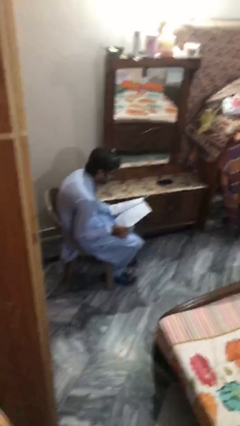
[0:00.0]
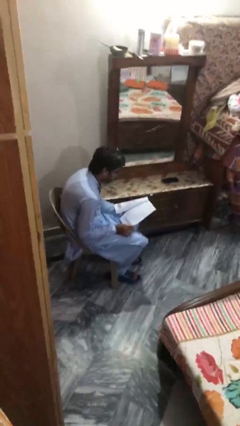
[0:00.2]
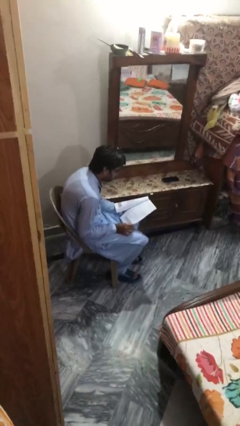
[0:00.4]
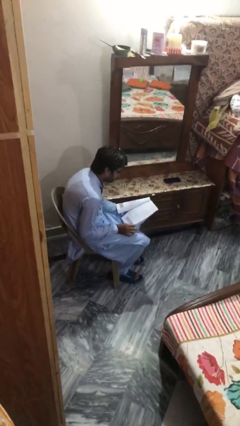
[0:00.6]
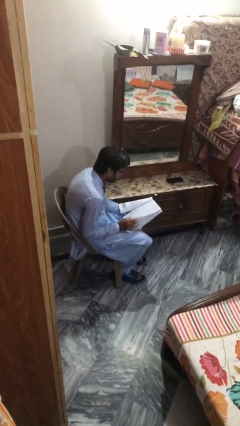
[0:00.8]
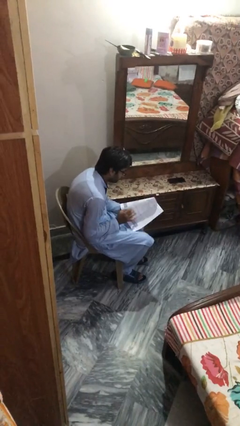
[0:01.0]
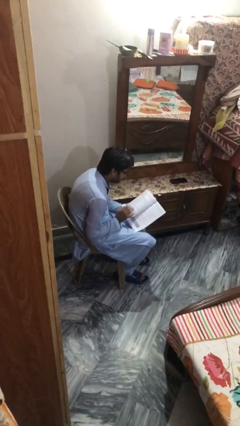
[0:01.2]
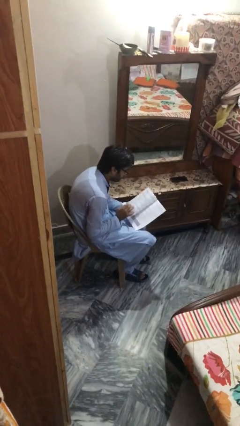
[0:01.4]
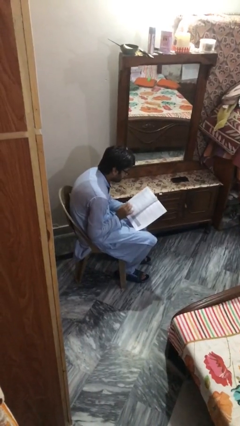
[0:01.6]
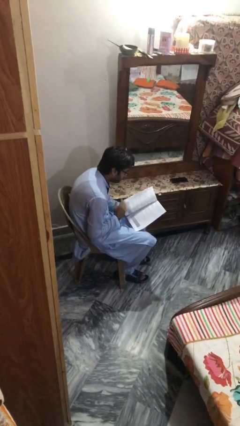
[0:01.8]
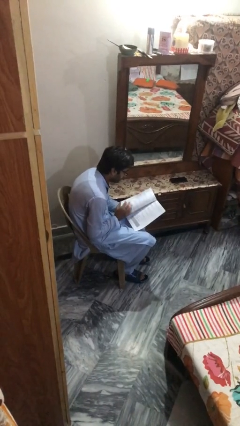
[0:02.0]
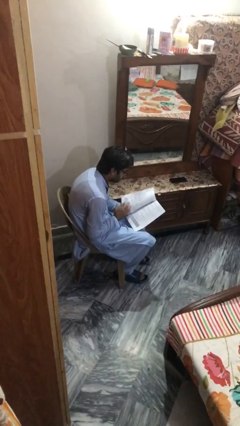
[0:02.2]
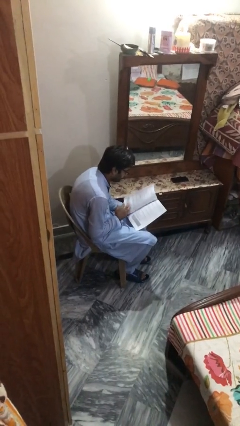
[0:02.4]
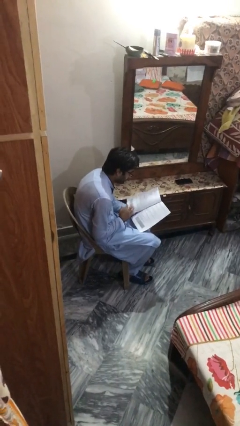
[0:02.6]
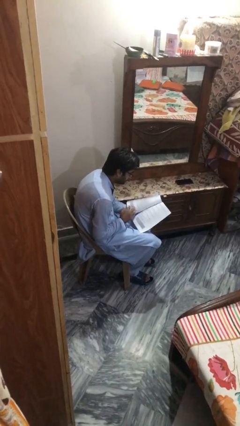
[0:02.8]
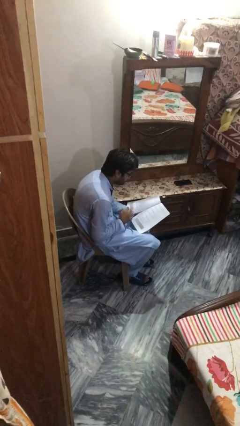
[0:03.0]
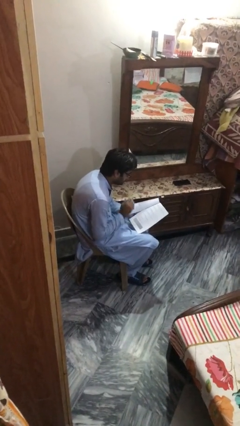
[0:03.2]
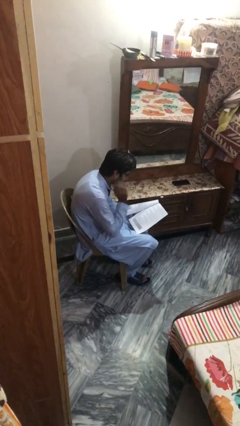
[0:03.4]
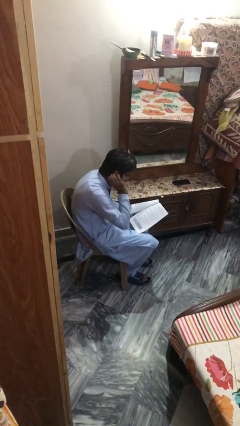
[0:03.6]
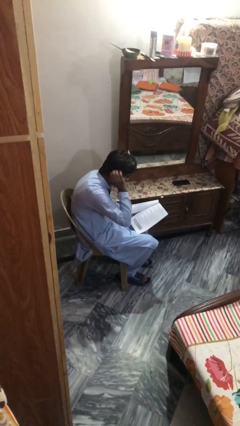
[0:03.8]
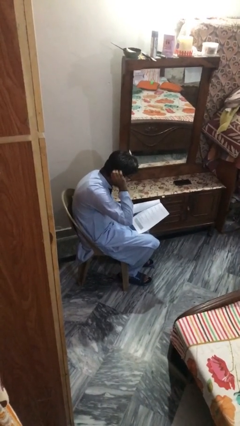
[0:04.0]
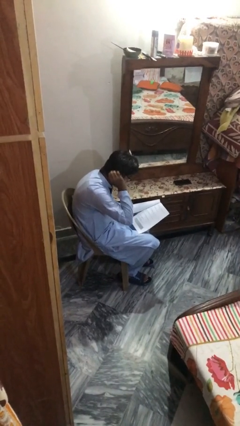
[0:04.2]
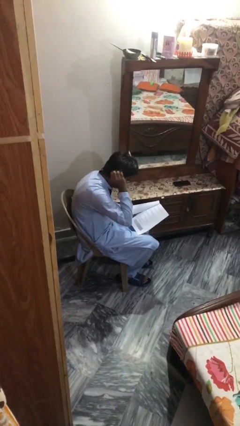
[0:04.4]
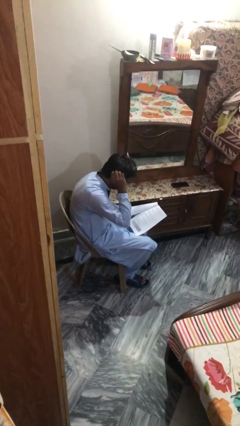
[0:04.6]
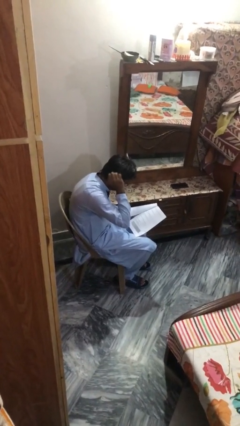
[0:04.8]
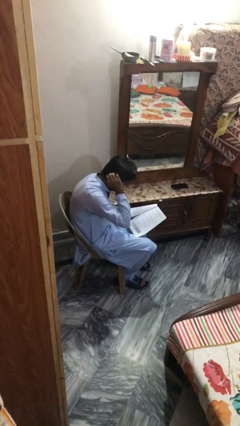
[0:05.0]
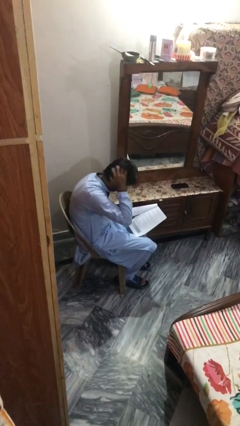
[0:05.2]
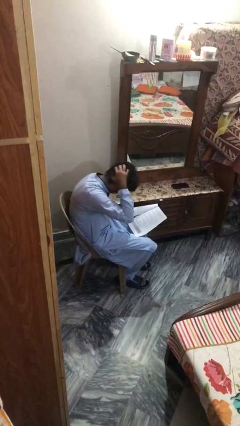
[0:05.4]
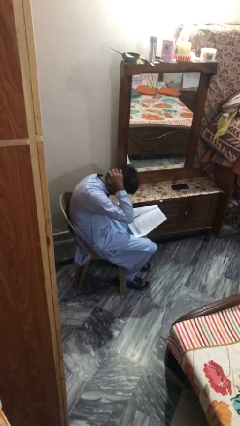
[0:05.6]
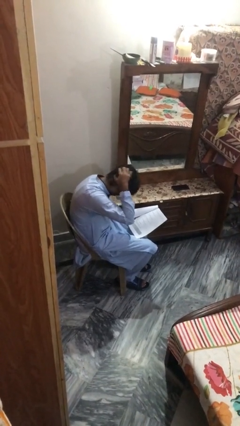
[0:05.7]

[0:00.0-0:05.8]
person reads document

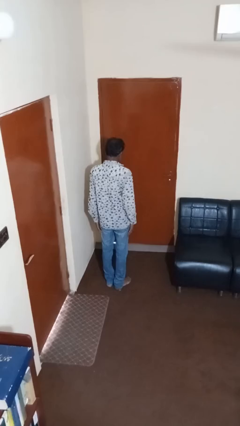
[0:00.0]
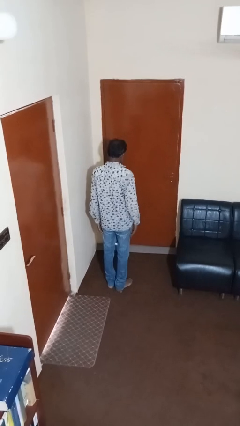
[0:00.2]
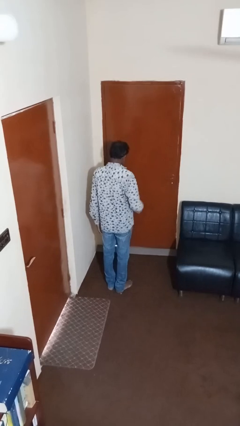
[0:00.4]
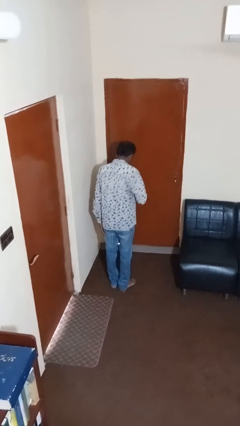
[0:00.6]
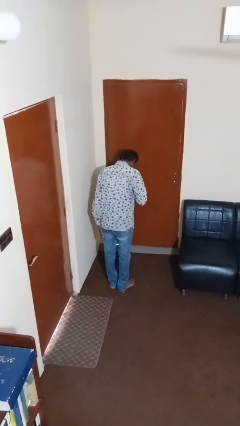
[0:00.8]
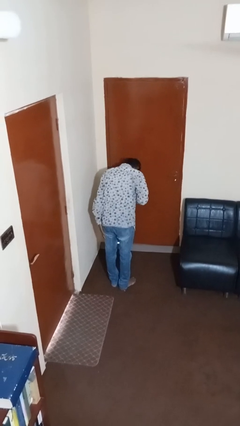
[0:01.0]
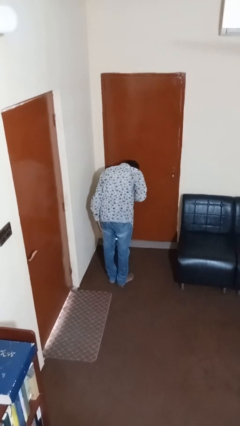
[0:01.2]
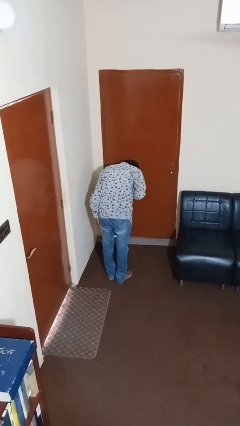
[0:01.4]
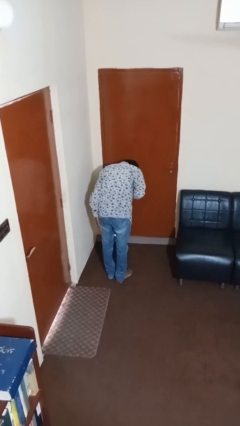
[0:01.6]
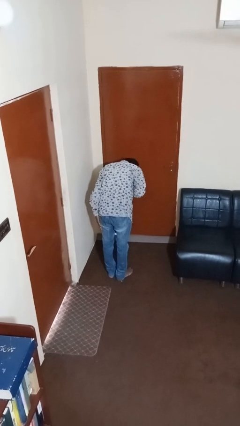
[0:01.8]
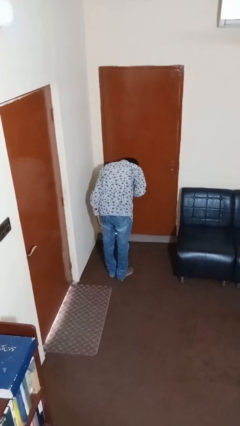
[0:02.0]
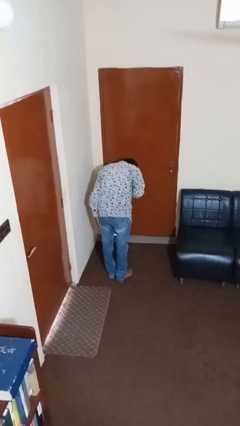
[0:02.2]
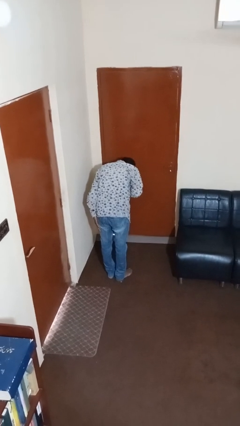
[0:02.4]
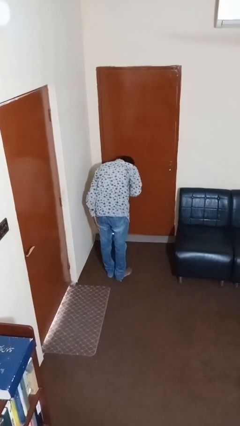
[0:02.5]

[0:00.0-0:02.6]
person bows

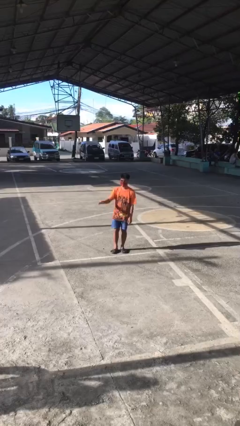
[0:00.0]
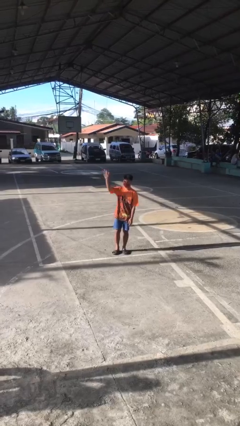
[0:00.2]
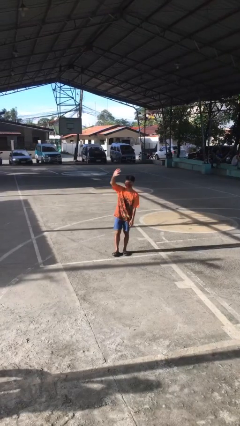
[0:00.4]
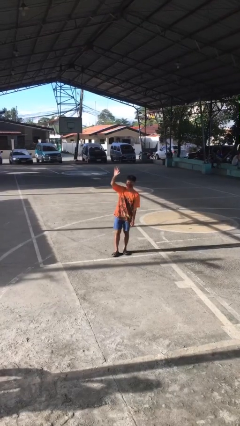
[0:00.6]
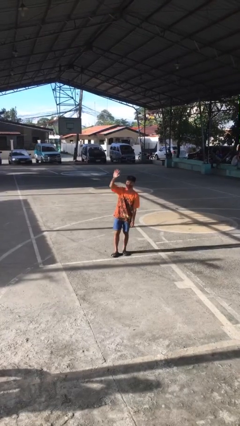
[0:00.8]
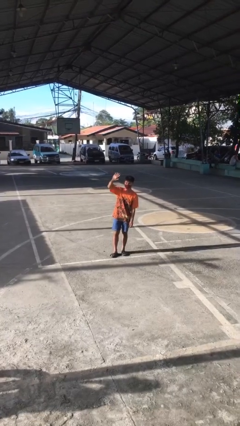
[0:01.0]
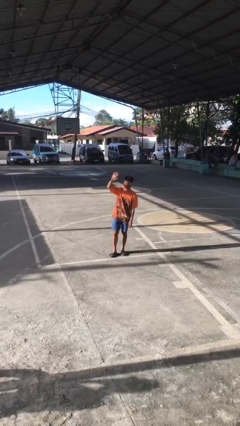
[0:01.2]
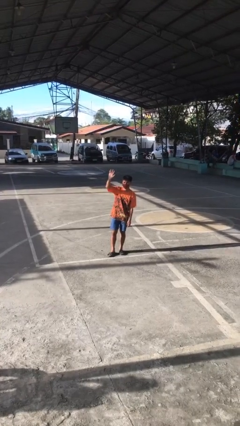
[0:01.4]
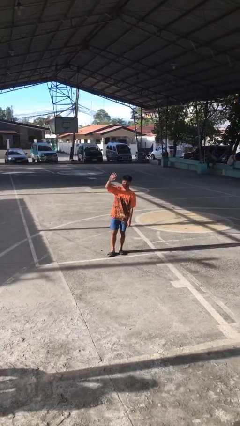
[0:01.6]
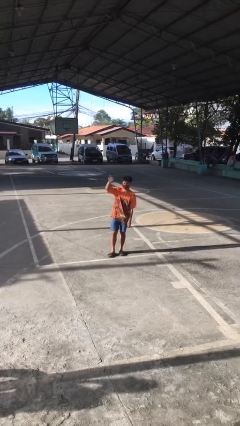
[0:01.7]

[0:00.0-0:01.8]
person waves at person

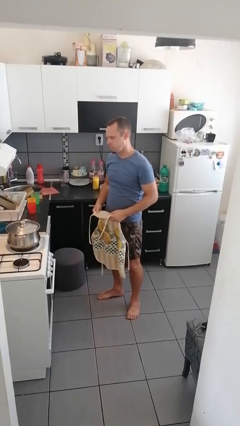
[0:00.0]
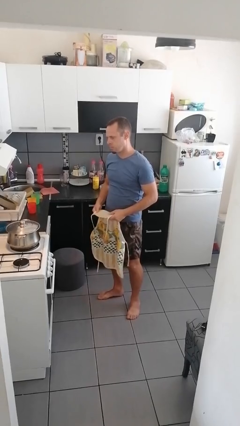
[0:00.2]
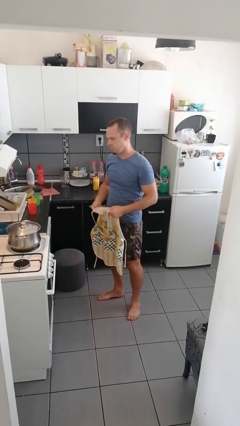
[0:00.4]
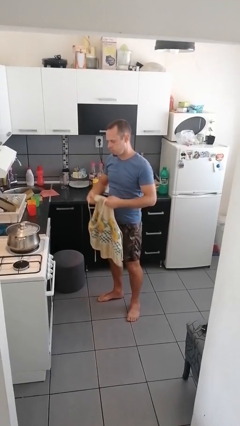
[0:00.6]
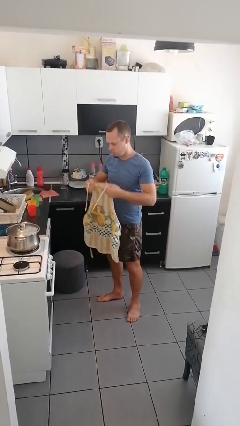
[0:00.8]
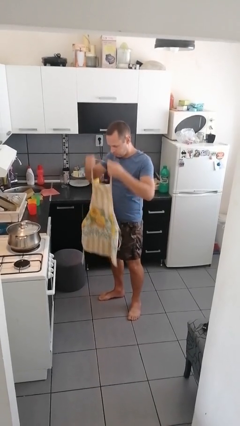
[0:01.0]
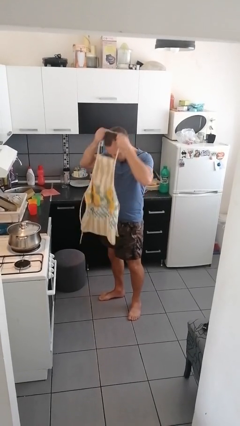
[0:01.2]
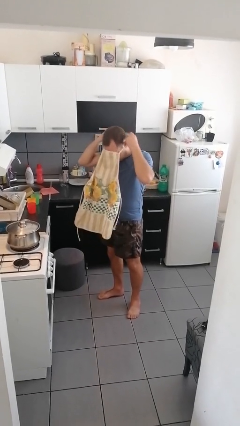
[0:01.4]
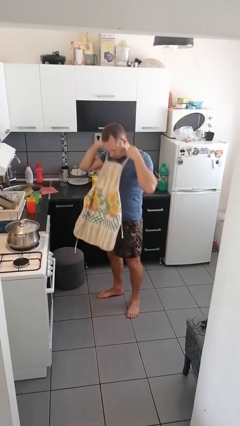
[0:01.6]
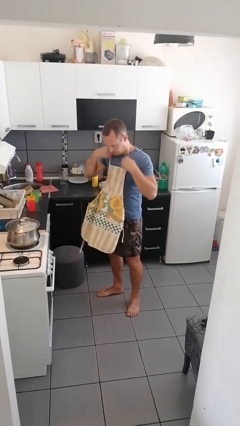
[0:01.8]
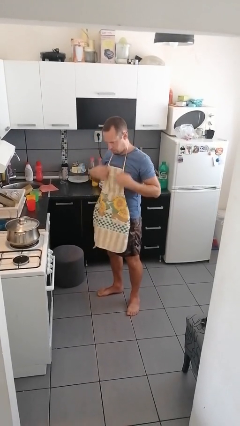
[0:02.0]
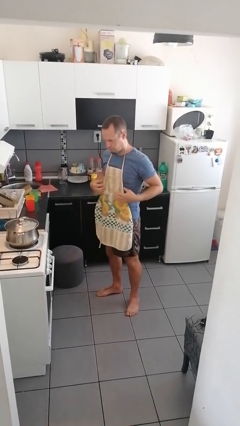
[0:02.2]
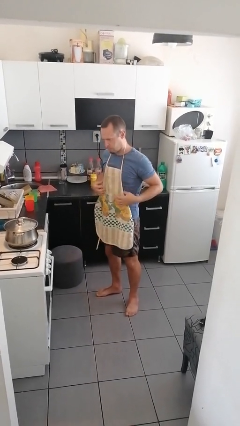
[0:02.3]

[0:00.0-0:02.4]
person puts on apron

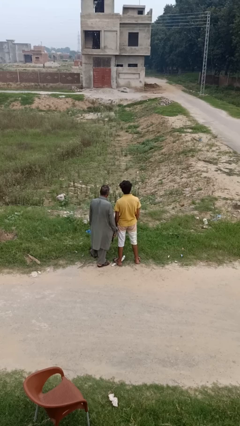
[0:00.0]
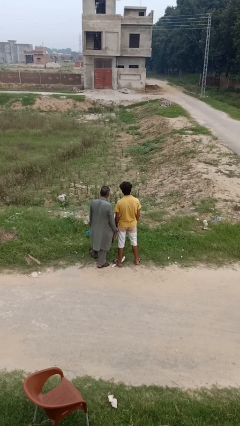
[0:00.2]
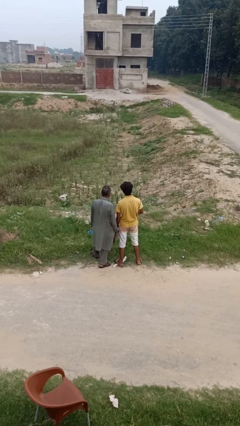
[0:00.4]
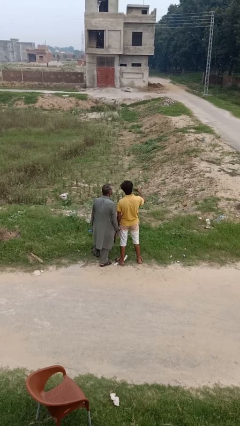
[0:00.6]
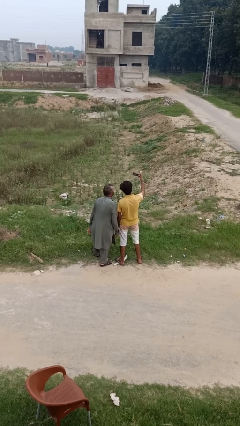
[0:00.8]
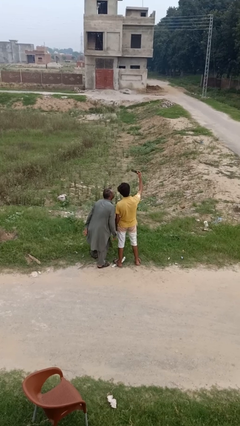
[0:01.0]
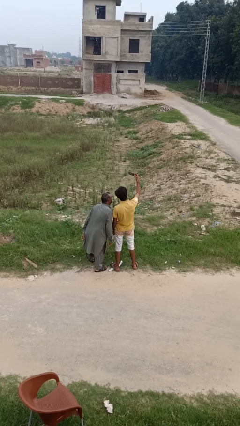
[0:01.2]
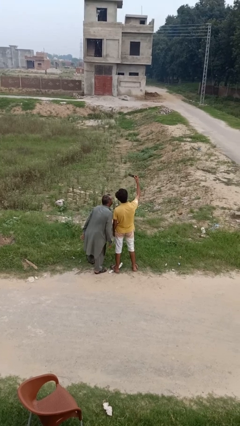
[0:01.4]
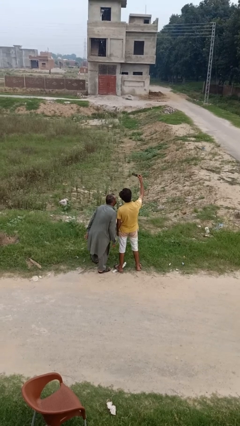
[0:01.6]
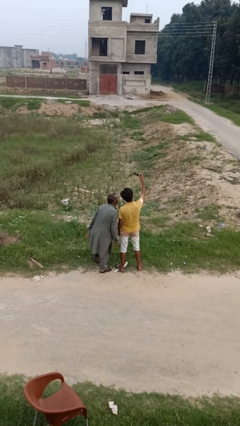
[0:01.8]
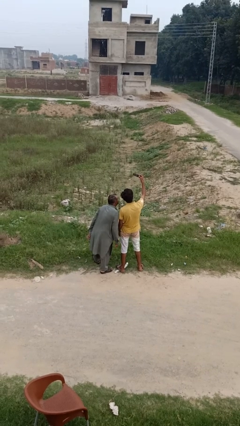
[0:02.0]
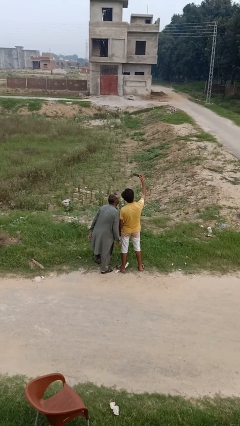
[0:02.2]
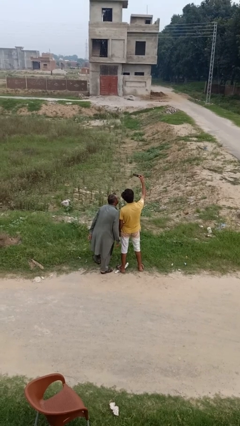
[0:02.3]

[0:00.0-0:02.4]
person takes selfie with person

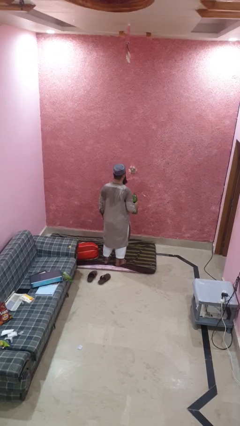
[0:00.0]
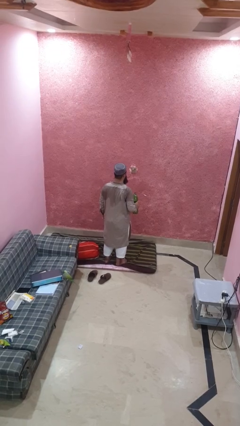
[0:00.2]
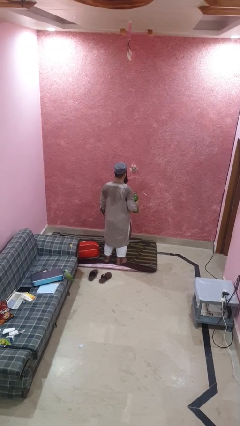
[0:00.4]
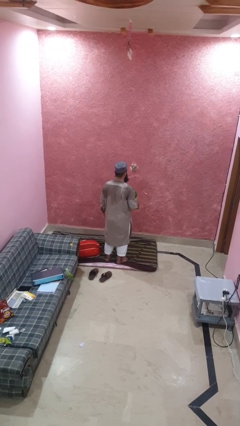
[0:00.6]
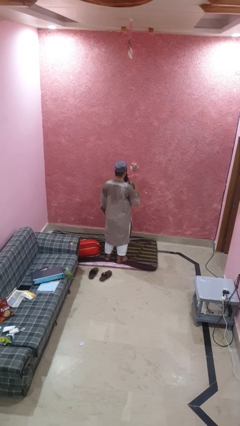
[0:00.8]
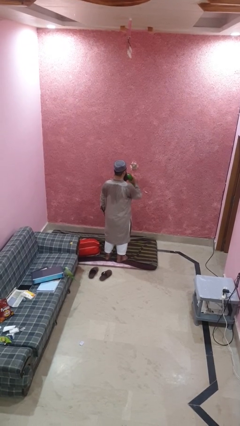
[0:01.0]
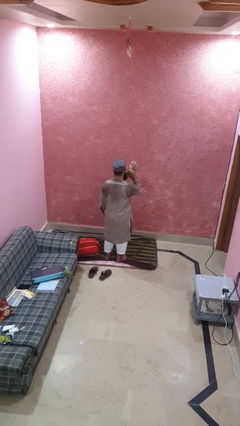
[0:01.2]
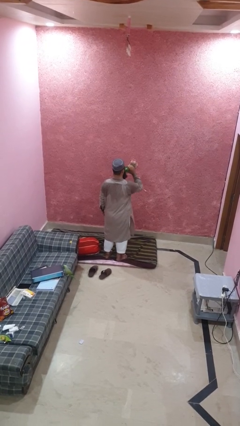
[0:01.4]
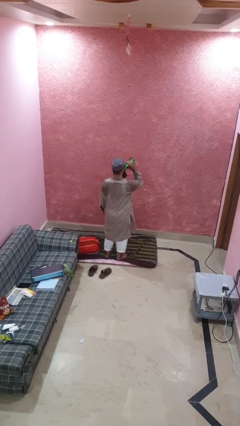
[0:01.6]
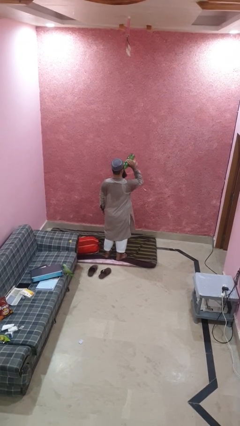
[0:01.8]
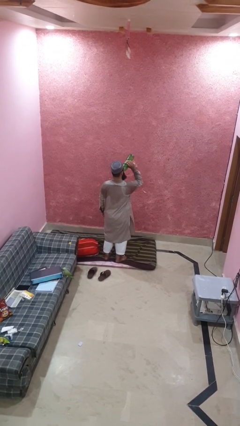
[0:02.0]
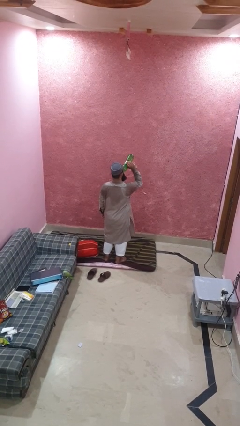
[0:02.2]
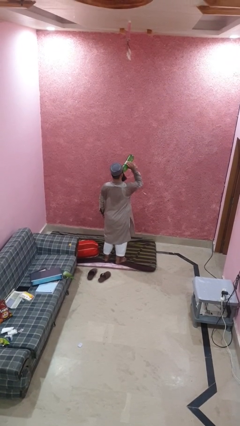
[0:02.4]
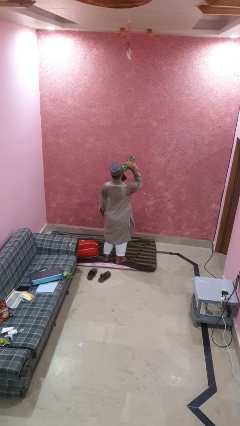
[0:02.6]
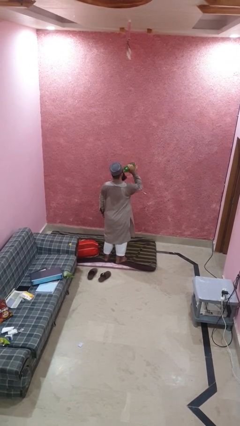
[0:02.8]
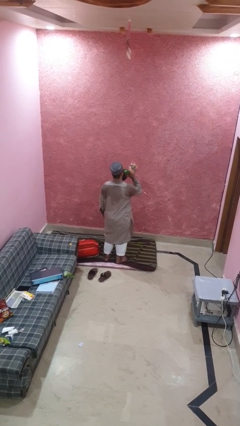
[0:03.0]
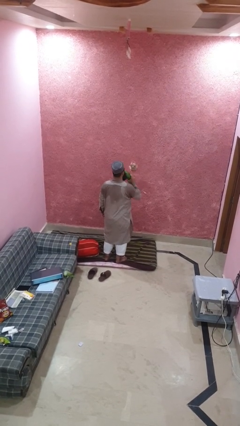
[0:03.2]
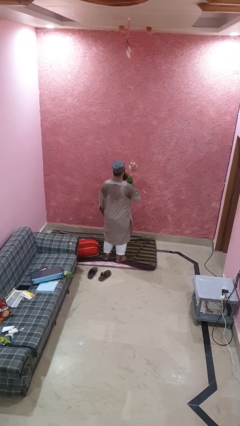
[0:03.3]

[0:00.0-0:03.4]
person drinks from bottle
